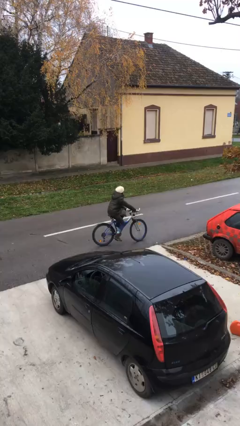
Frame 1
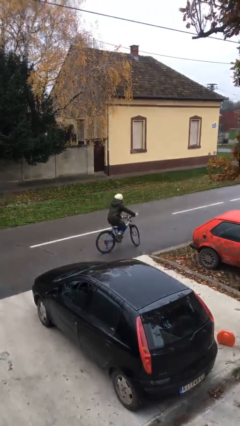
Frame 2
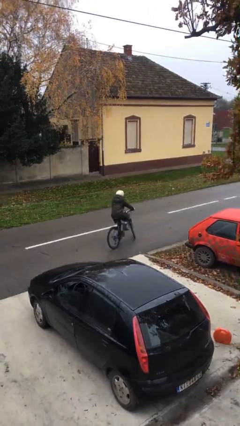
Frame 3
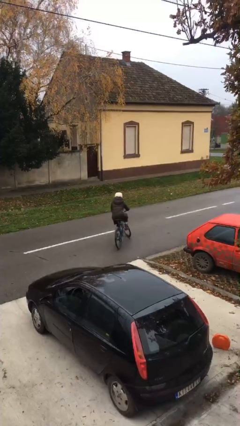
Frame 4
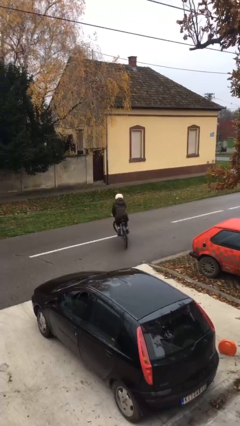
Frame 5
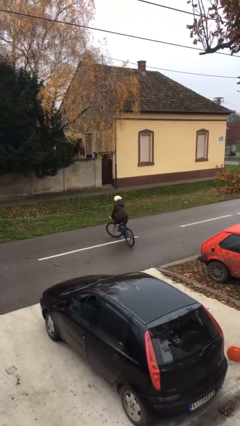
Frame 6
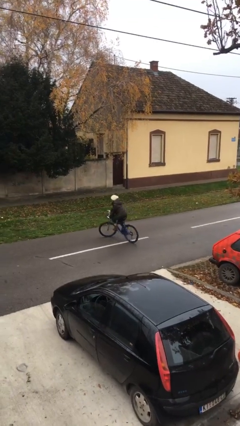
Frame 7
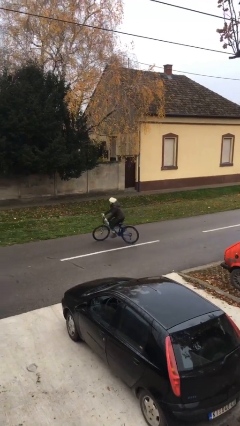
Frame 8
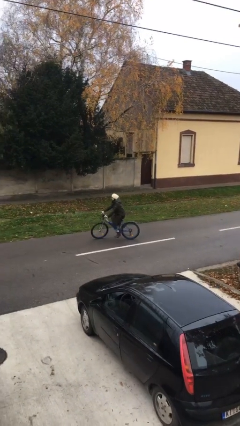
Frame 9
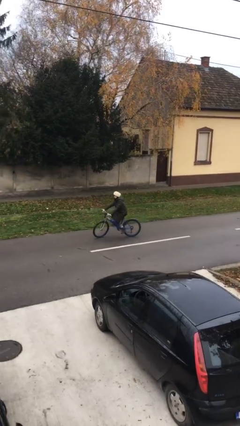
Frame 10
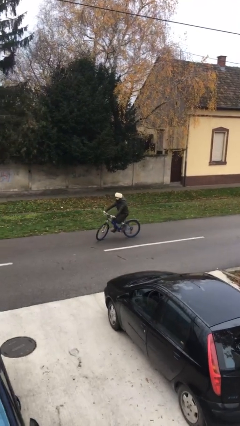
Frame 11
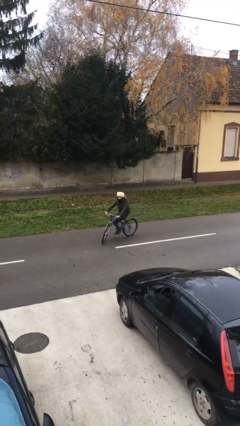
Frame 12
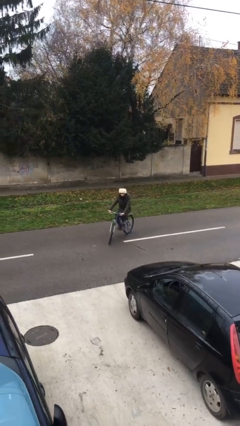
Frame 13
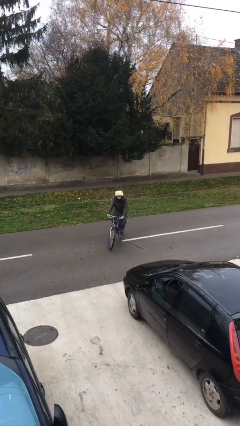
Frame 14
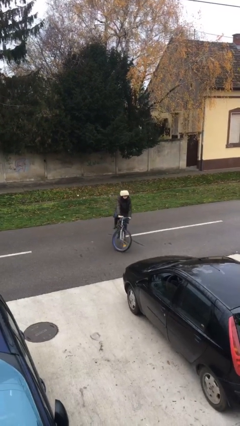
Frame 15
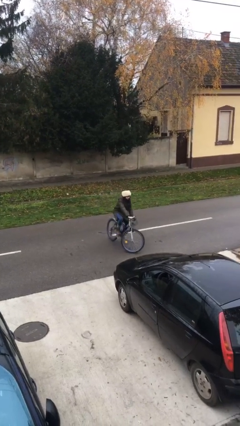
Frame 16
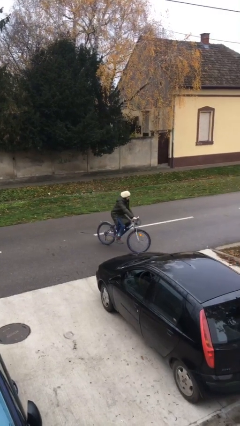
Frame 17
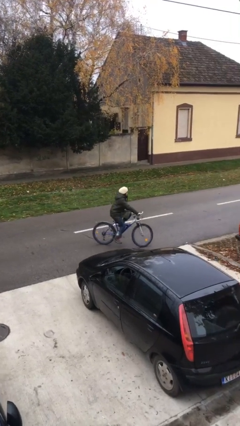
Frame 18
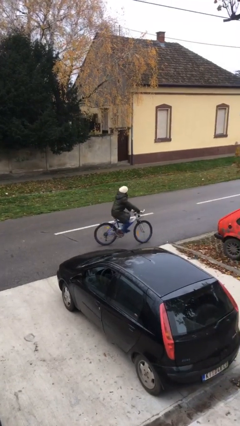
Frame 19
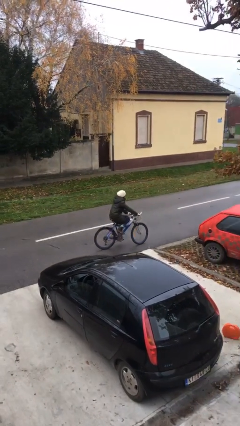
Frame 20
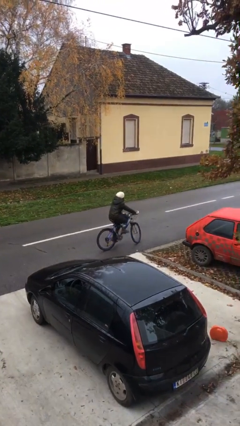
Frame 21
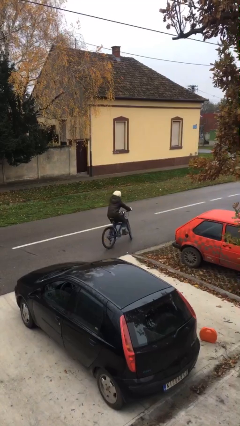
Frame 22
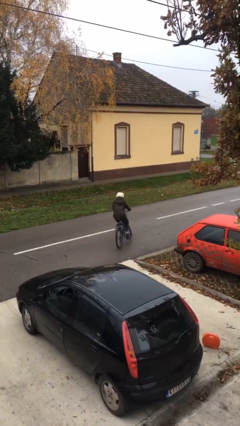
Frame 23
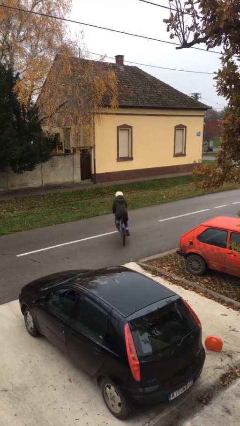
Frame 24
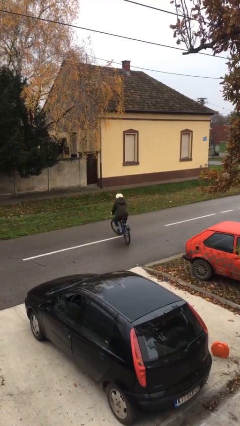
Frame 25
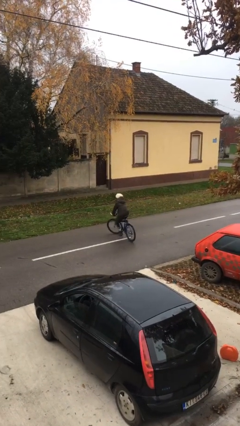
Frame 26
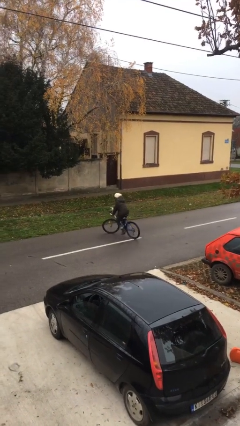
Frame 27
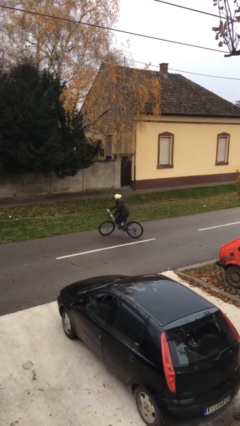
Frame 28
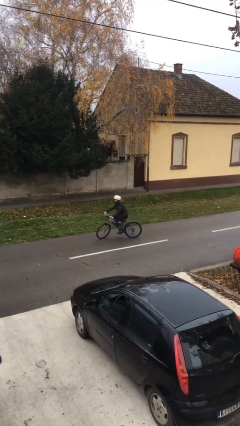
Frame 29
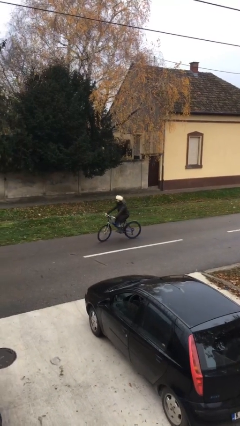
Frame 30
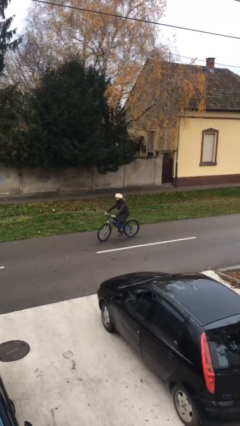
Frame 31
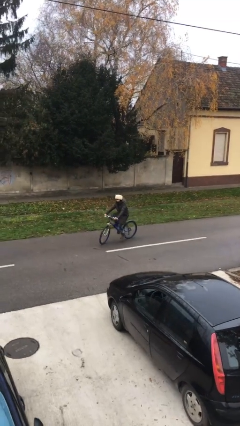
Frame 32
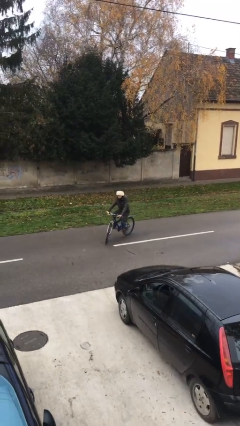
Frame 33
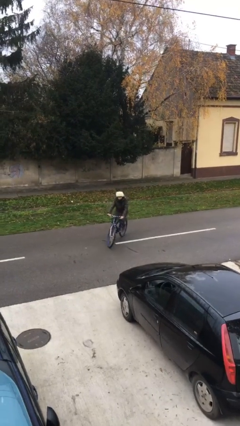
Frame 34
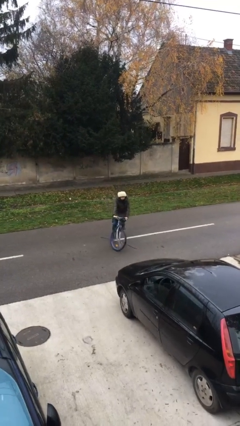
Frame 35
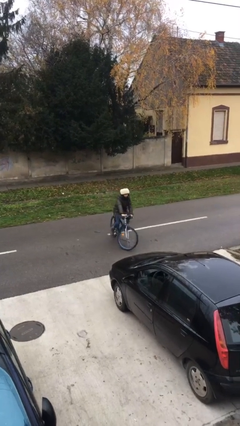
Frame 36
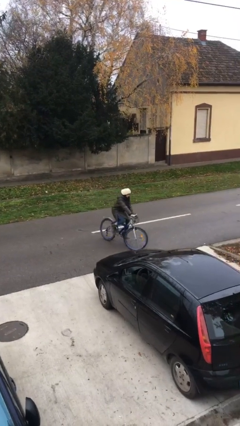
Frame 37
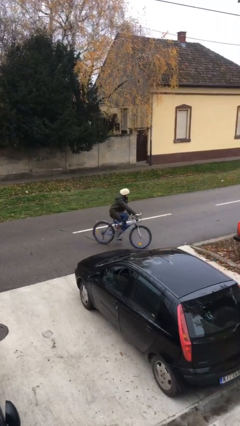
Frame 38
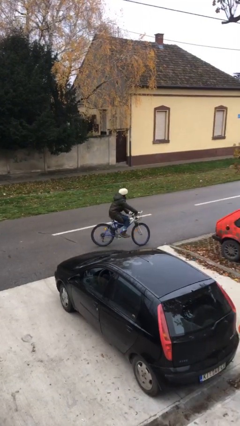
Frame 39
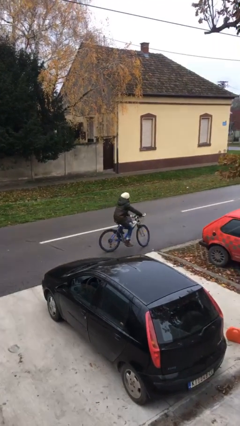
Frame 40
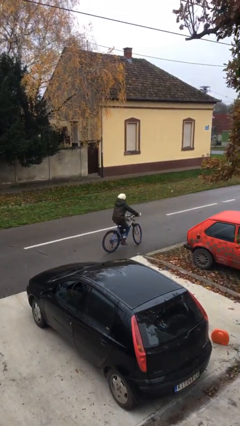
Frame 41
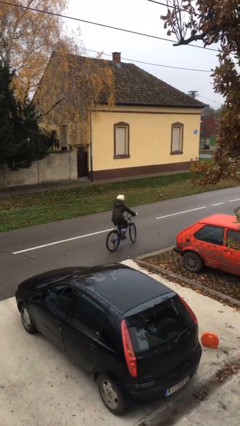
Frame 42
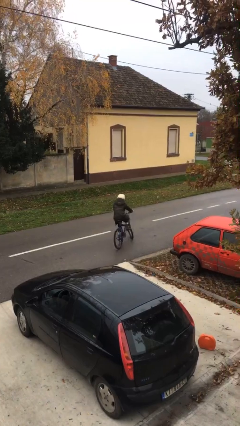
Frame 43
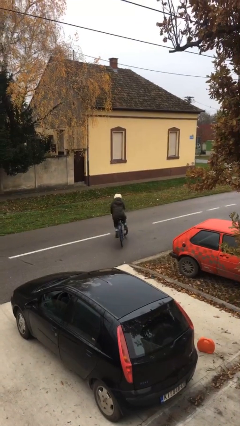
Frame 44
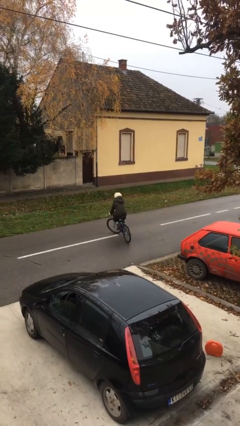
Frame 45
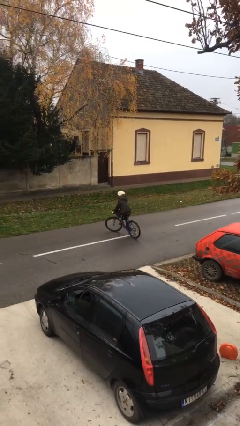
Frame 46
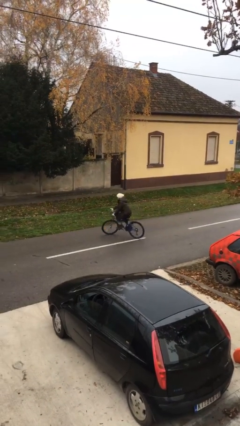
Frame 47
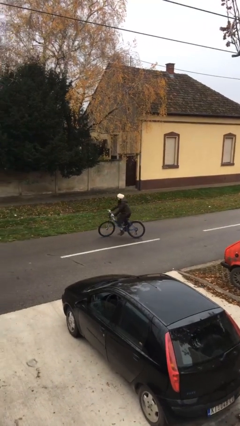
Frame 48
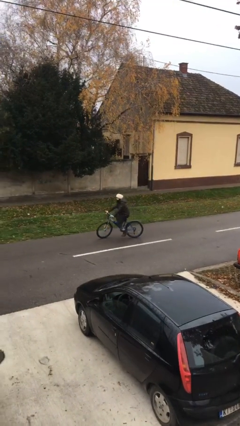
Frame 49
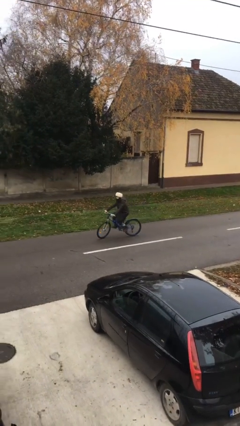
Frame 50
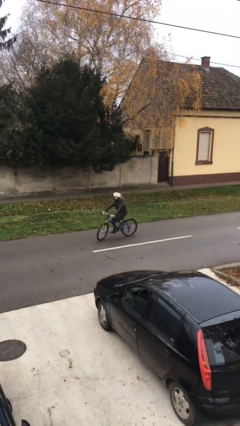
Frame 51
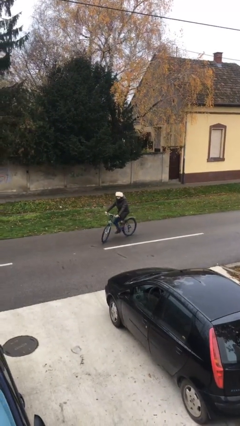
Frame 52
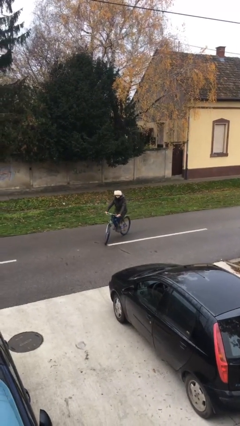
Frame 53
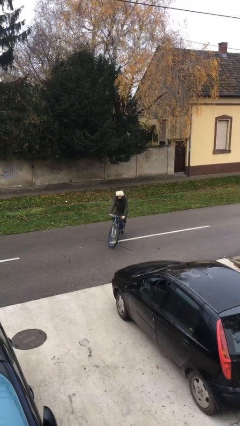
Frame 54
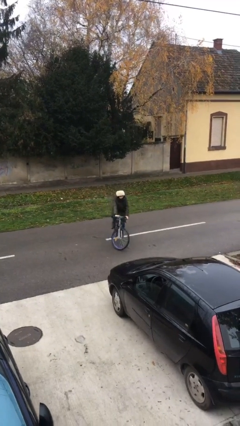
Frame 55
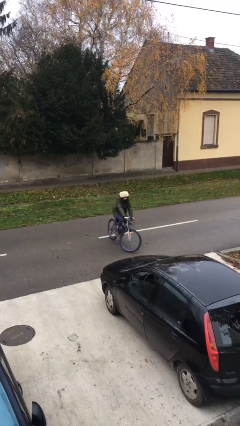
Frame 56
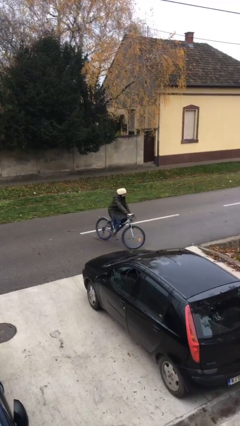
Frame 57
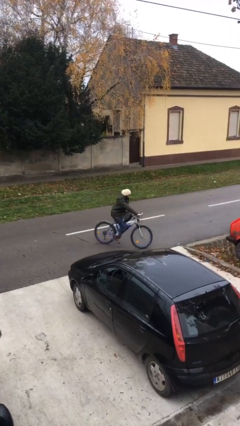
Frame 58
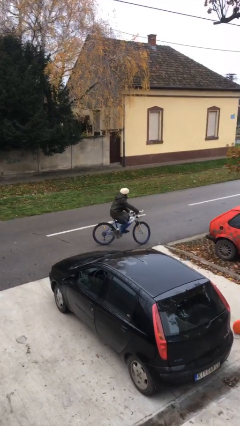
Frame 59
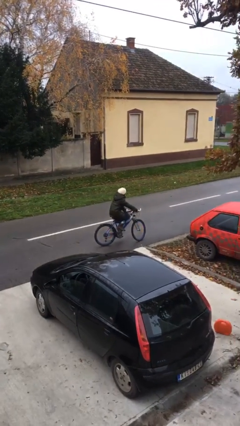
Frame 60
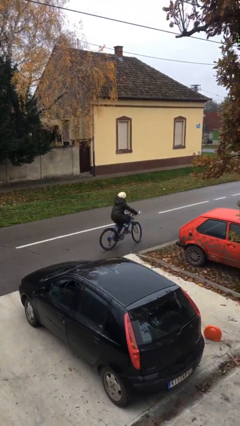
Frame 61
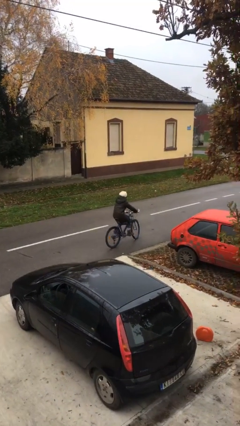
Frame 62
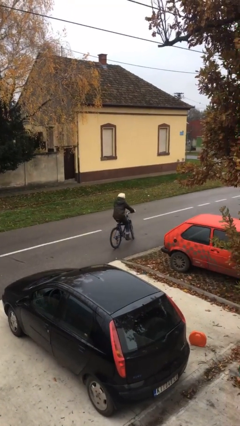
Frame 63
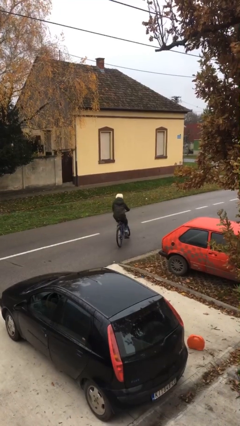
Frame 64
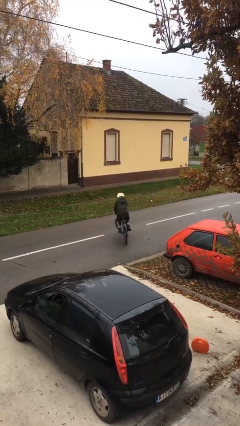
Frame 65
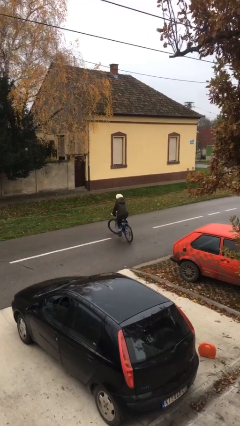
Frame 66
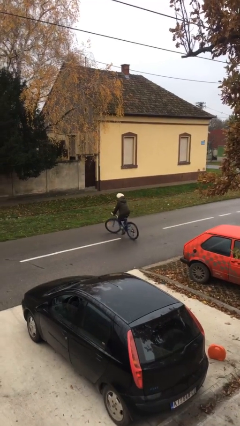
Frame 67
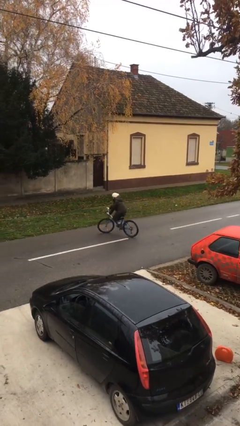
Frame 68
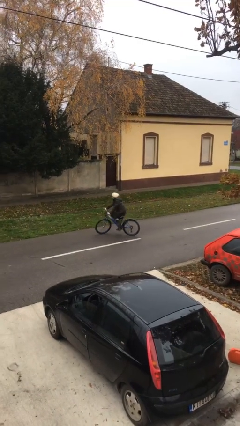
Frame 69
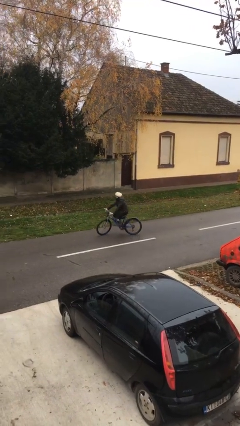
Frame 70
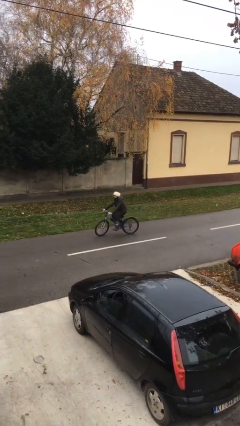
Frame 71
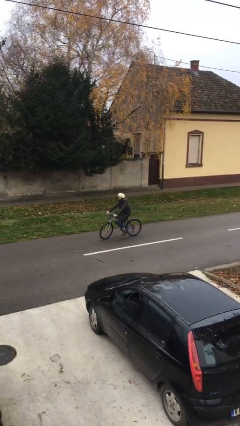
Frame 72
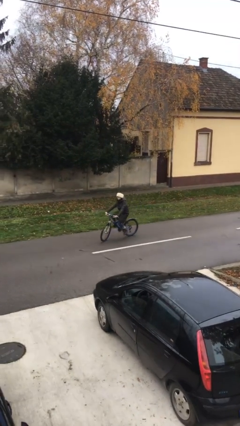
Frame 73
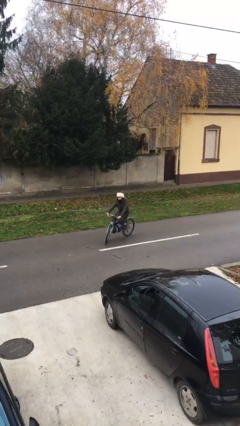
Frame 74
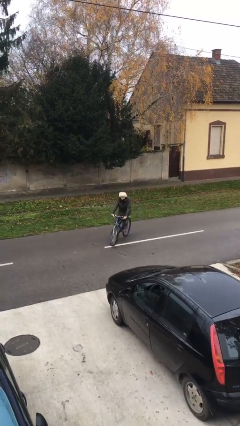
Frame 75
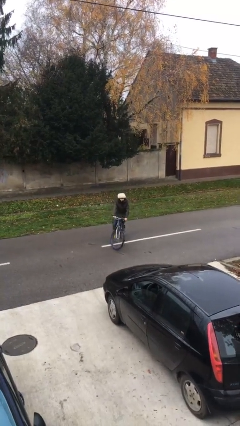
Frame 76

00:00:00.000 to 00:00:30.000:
person rides bicycle

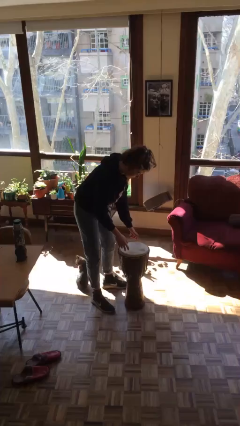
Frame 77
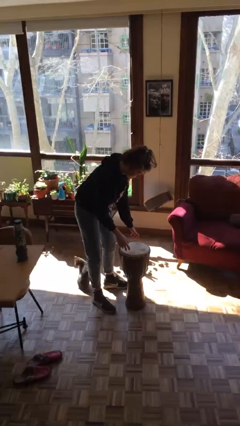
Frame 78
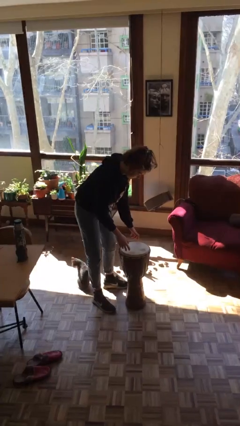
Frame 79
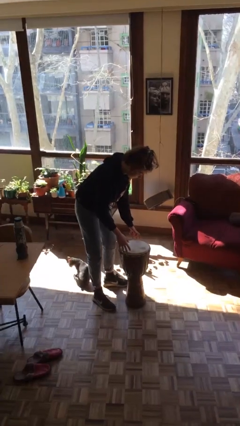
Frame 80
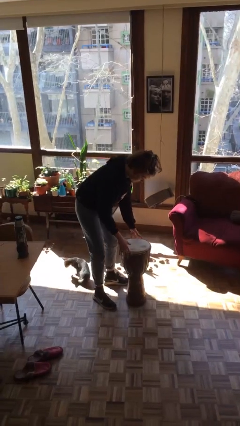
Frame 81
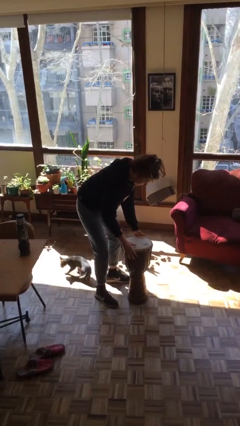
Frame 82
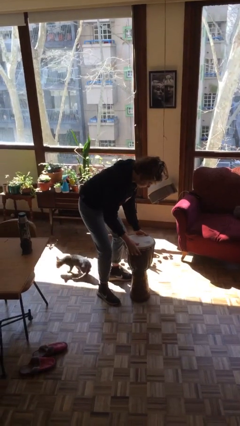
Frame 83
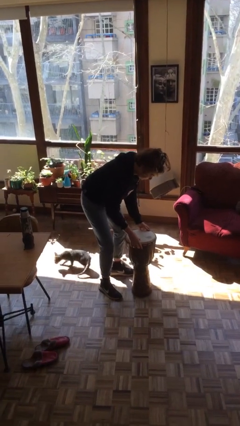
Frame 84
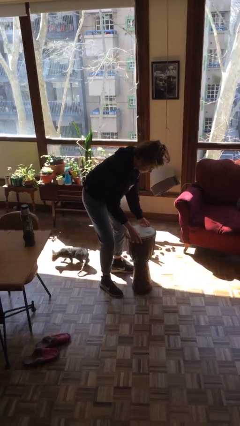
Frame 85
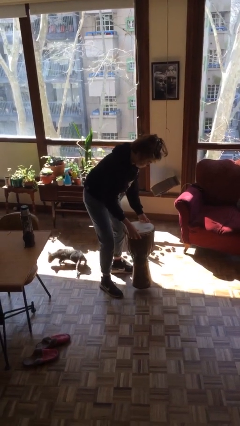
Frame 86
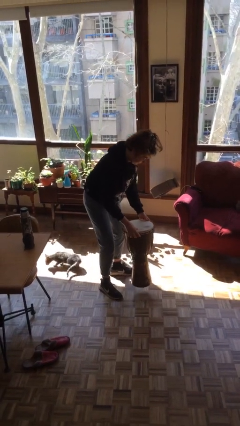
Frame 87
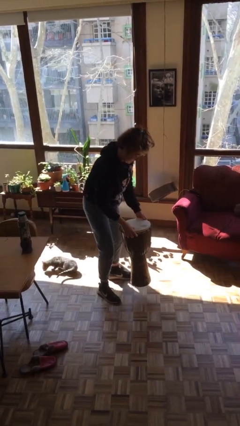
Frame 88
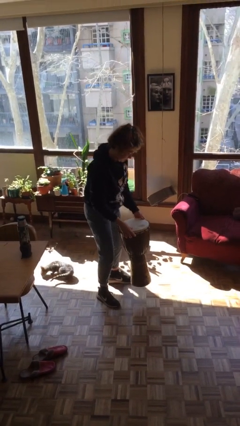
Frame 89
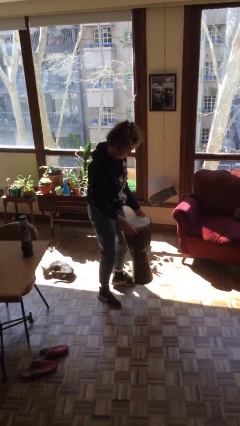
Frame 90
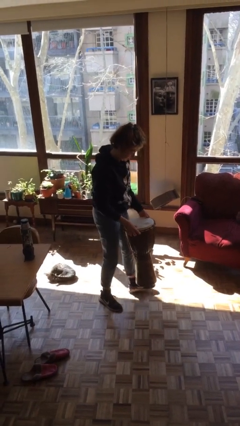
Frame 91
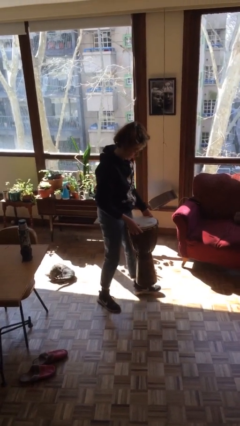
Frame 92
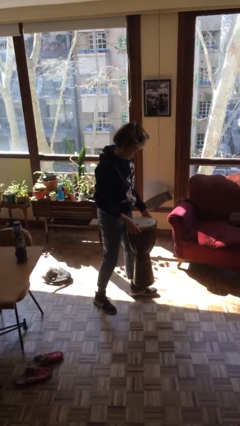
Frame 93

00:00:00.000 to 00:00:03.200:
person picks up object from floor
